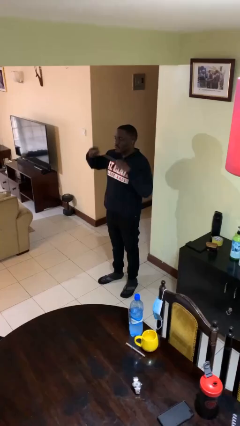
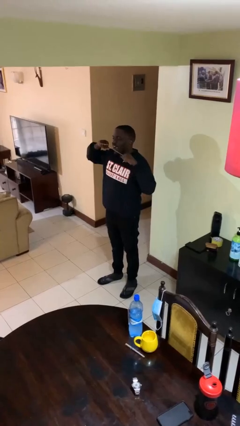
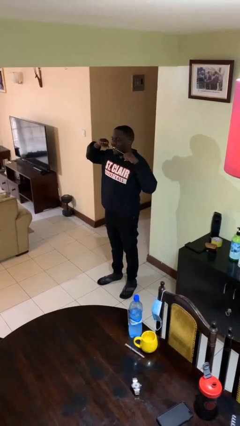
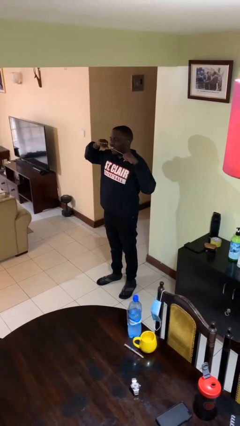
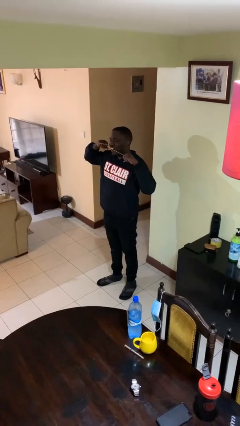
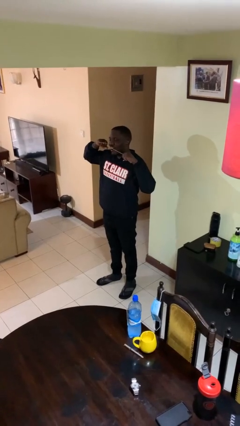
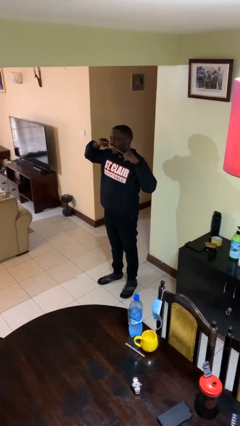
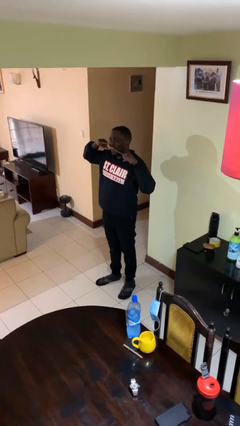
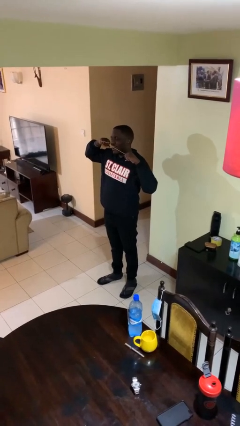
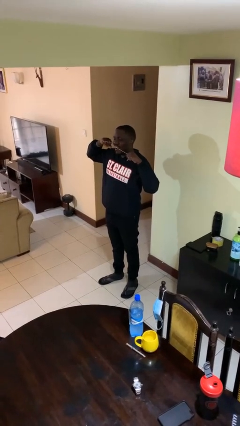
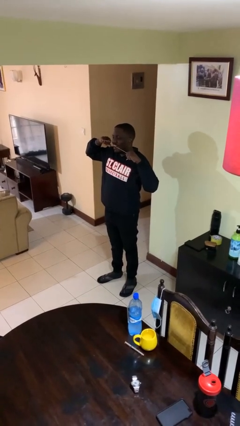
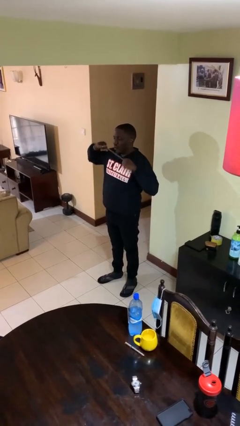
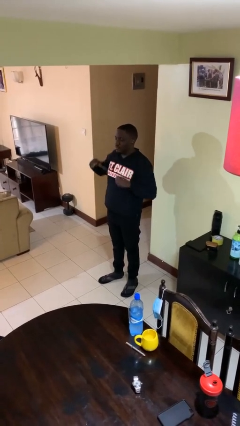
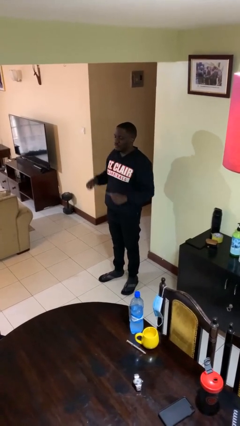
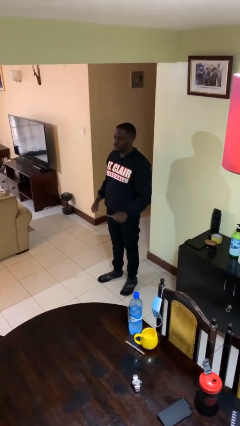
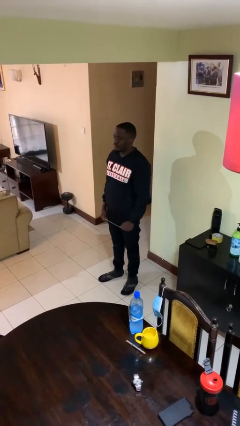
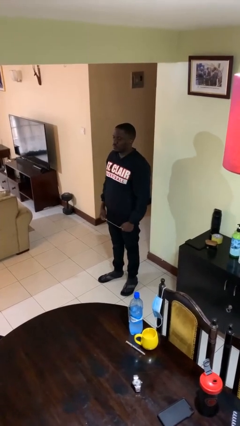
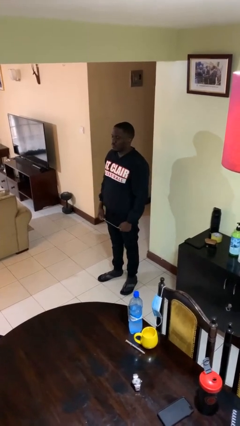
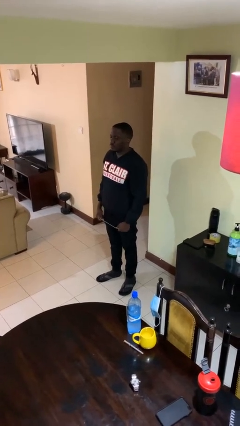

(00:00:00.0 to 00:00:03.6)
person flosses

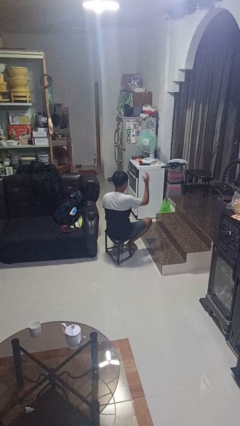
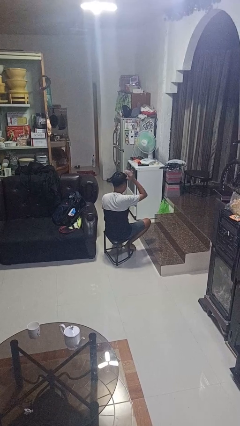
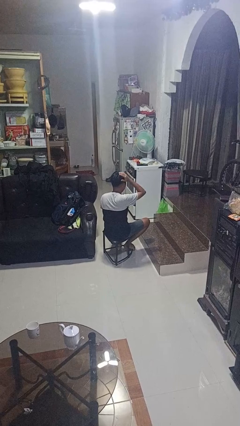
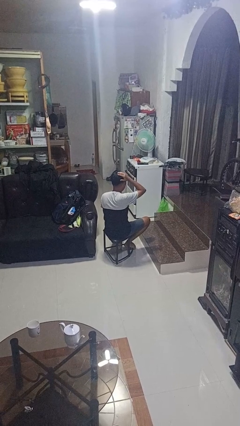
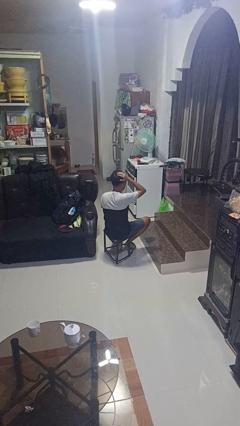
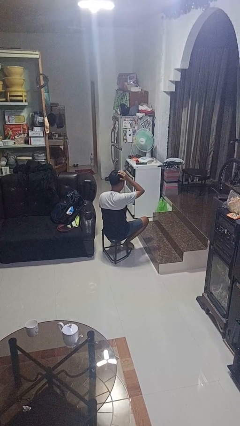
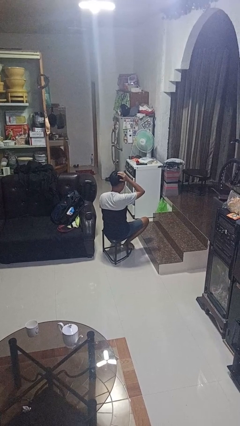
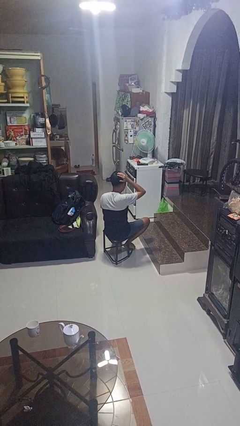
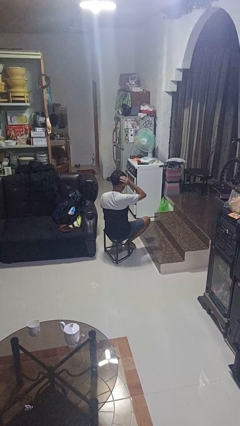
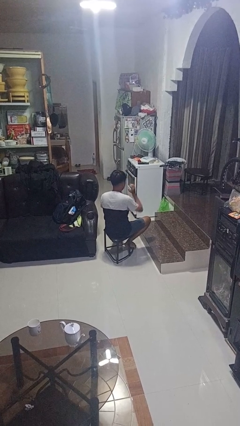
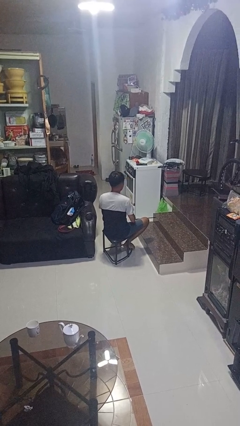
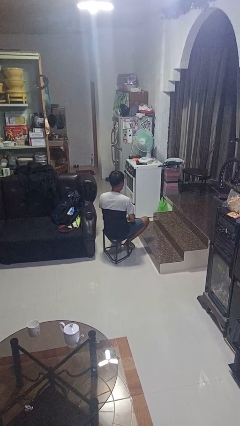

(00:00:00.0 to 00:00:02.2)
person pats head

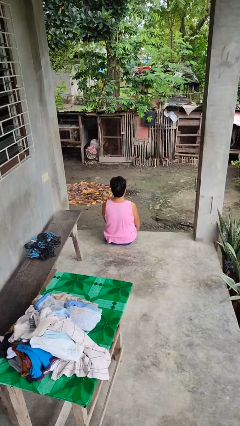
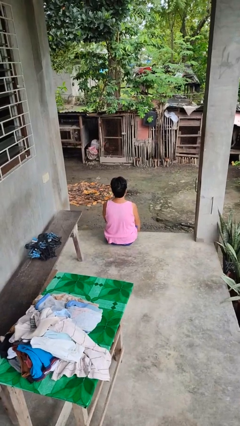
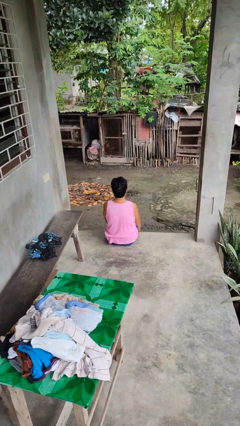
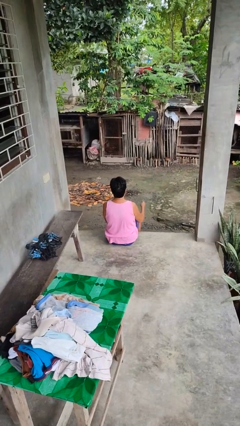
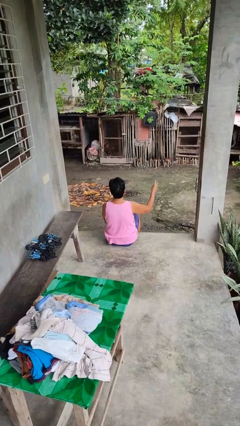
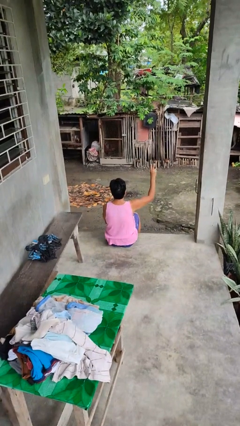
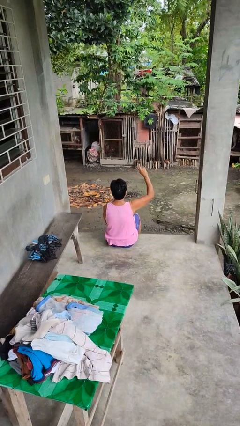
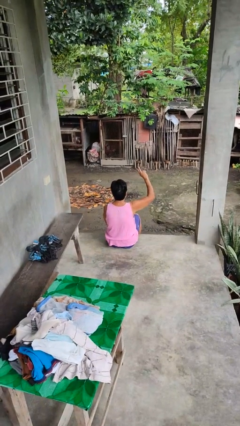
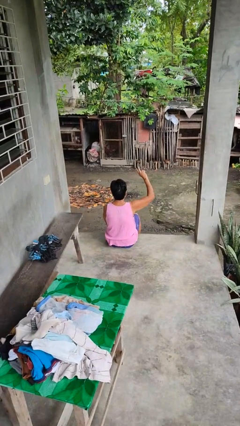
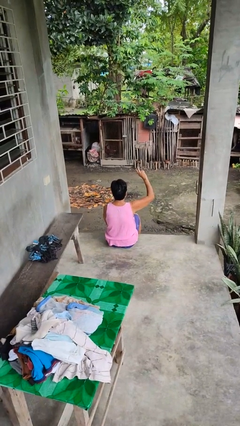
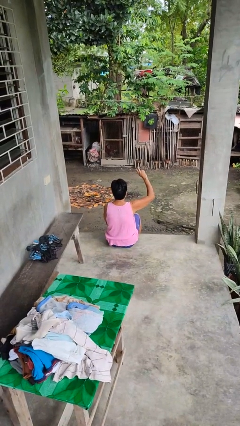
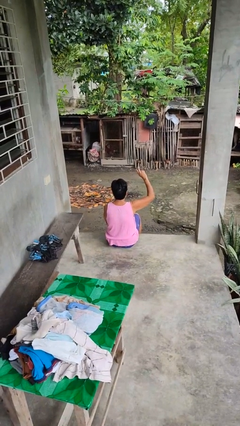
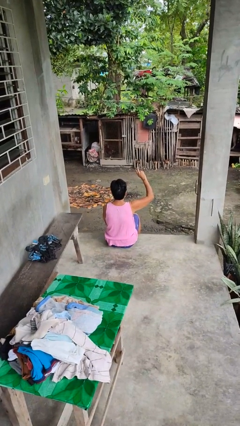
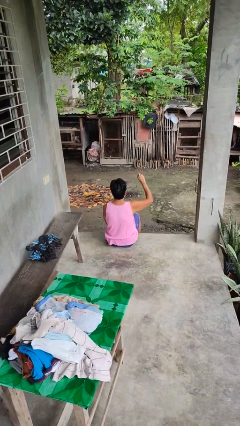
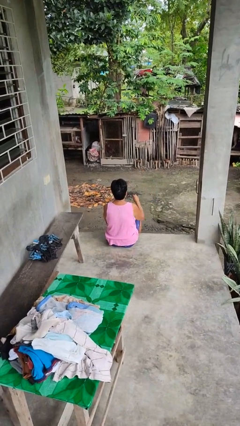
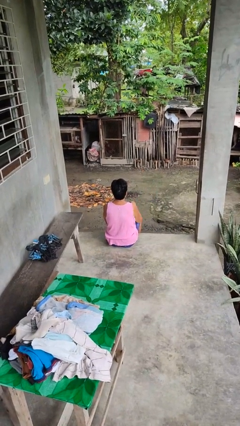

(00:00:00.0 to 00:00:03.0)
person gestures peace

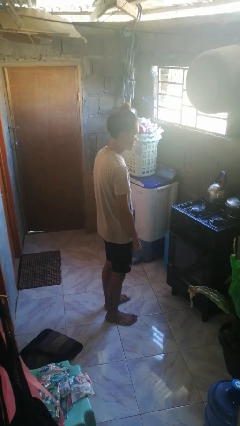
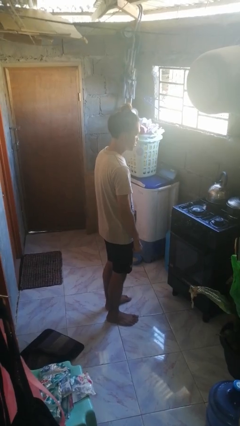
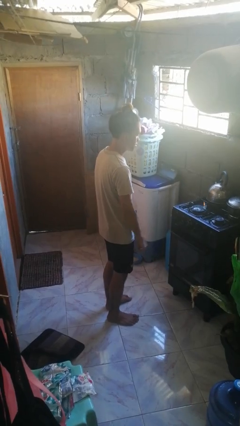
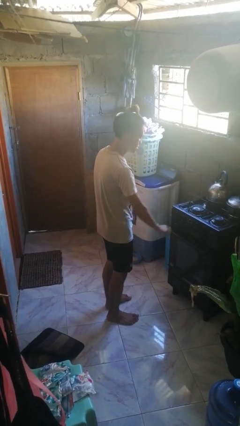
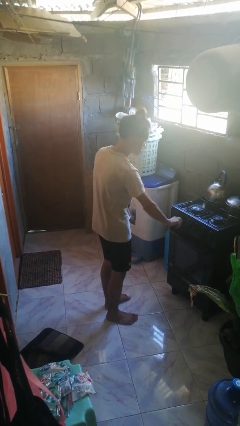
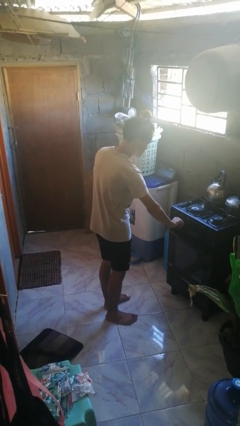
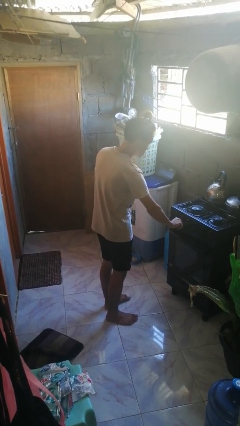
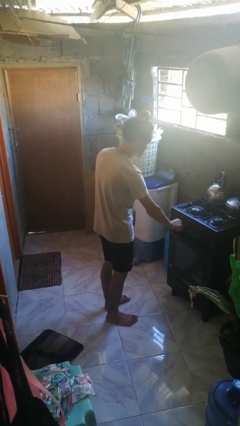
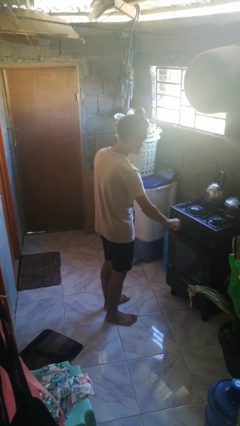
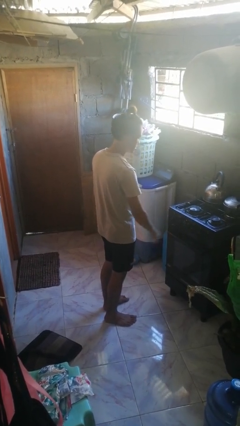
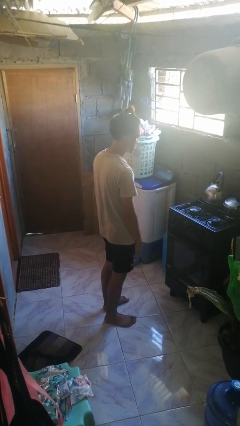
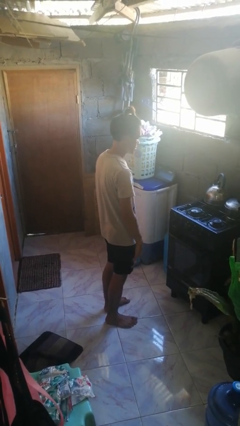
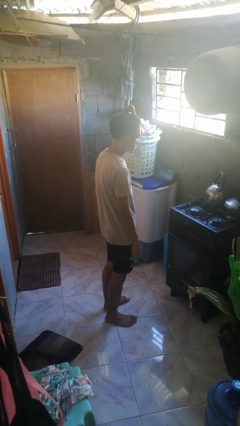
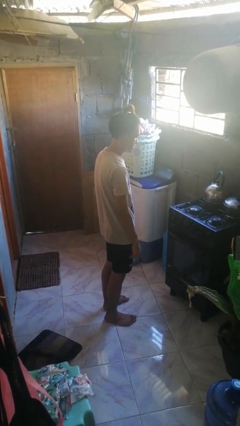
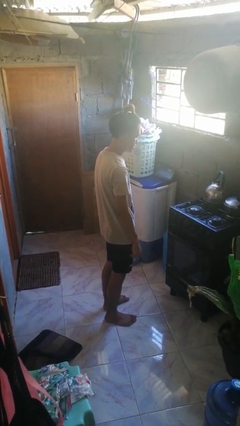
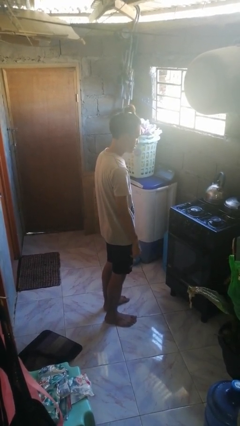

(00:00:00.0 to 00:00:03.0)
person turns off stovetop

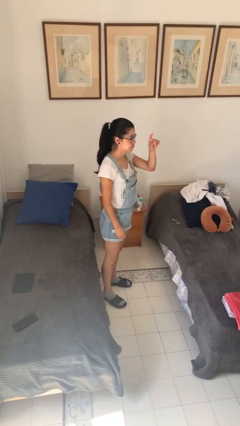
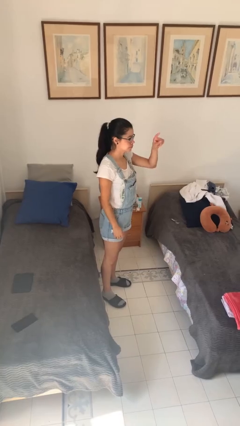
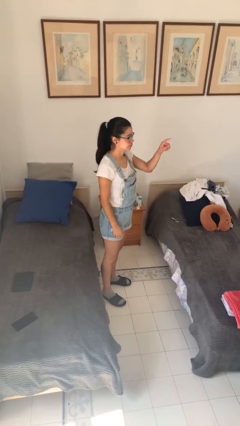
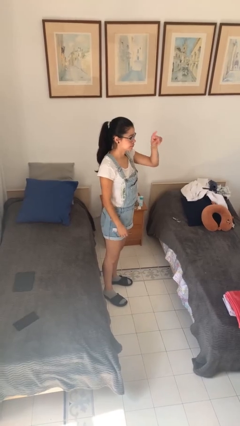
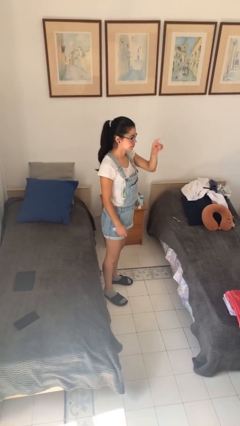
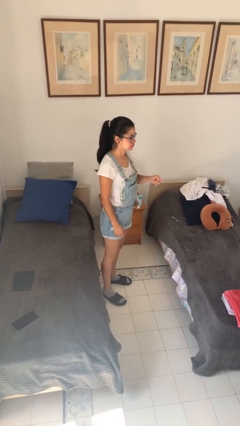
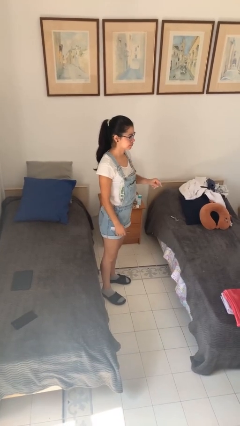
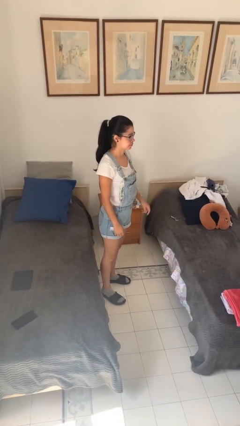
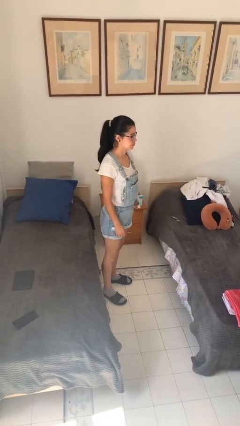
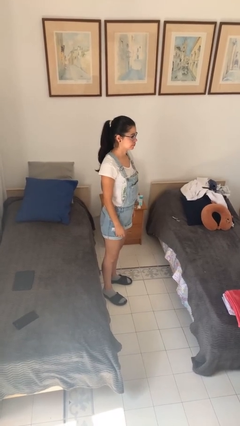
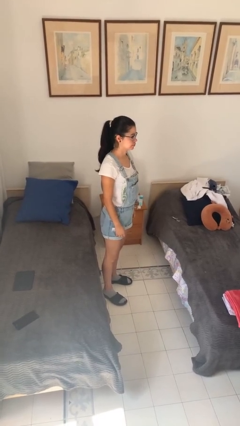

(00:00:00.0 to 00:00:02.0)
person gestures number four

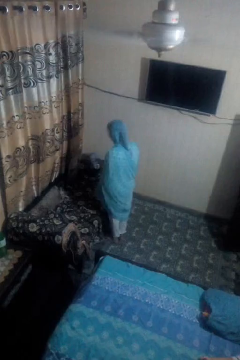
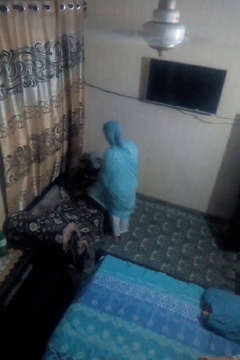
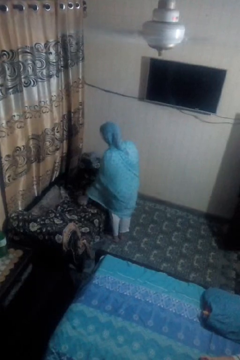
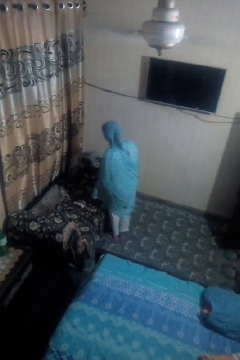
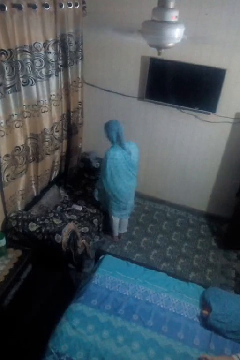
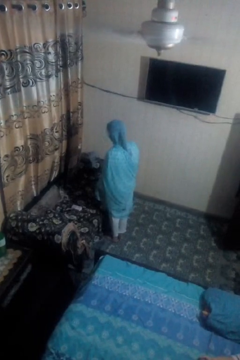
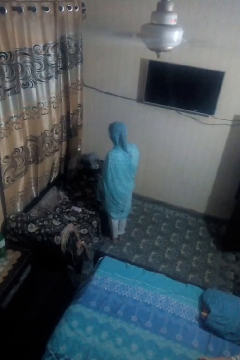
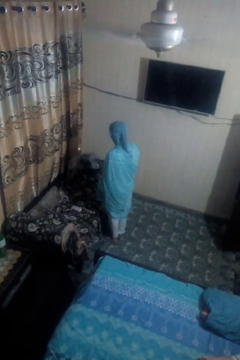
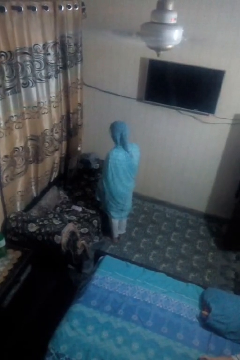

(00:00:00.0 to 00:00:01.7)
person puts down object on couch

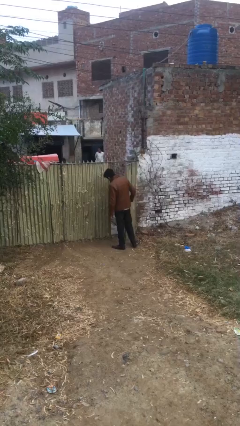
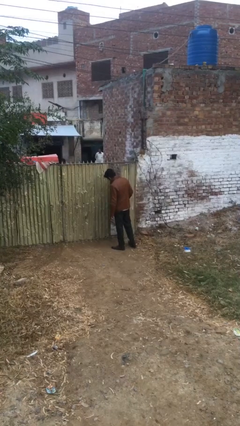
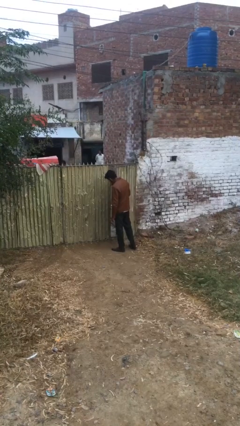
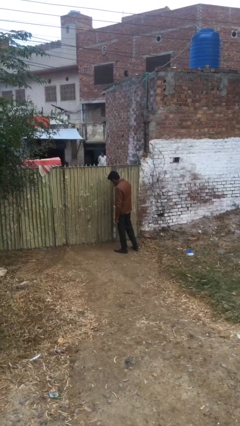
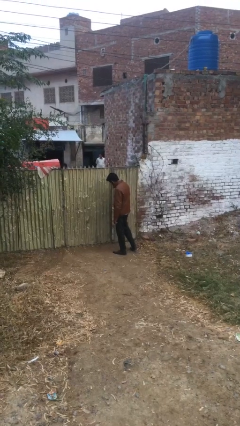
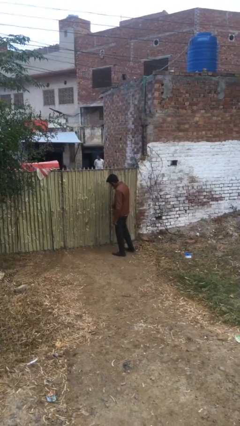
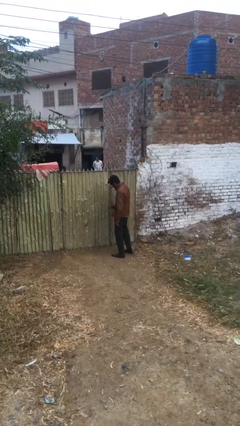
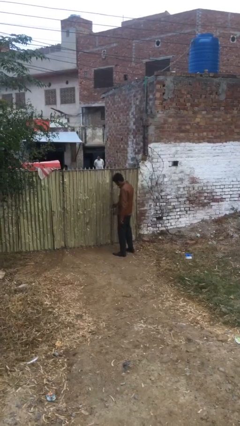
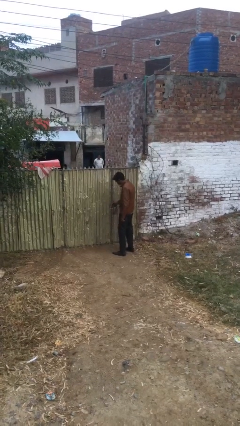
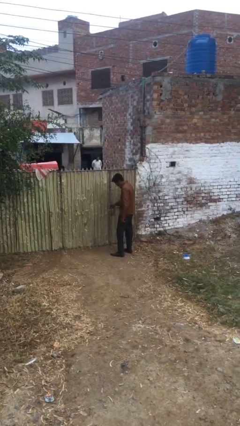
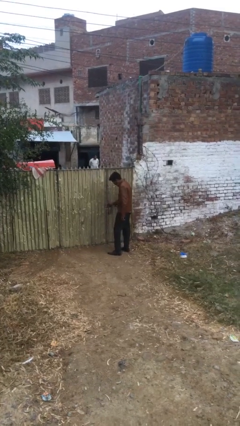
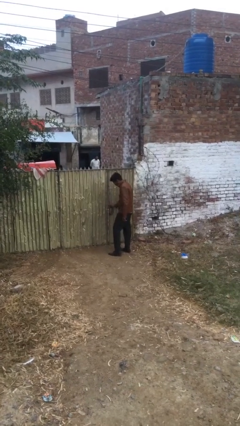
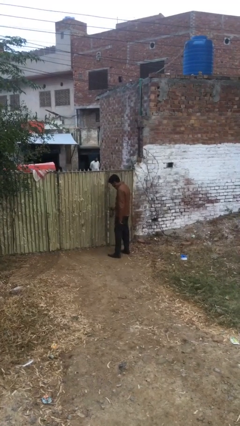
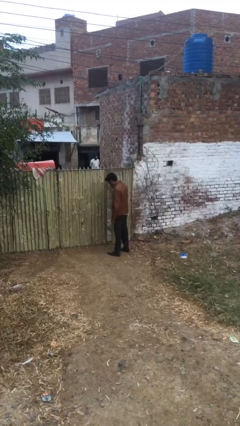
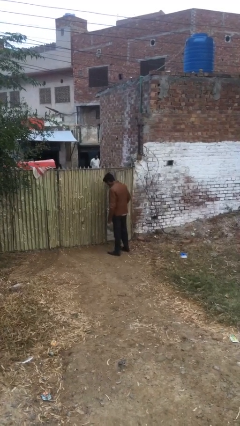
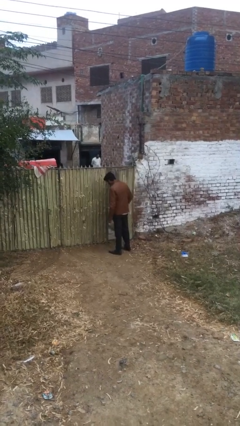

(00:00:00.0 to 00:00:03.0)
person closes facility door
